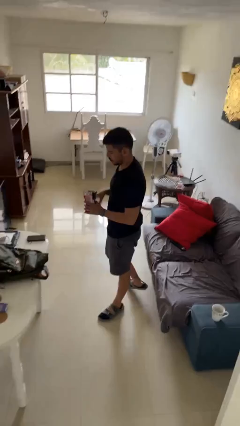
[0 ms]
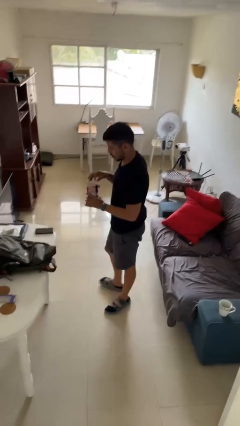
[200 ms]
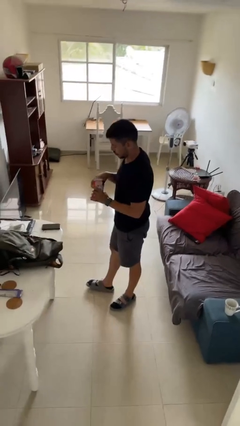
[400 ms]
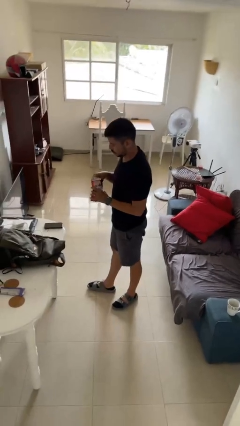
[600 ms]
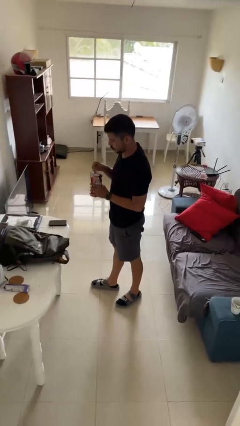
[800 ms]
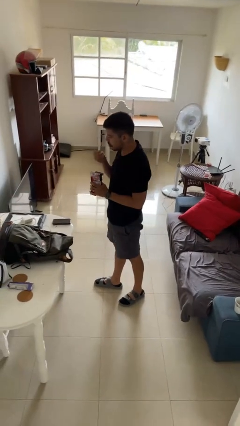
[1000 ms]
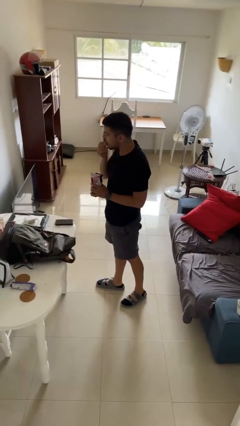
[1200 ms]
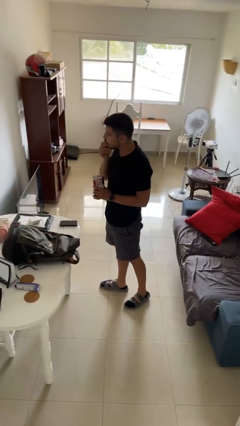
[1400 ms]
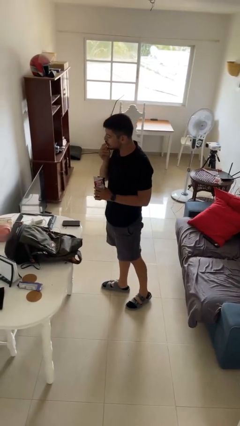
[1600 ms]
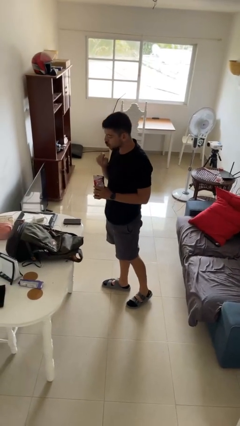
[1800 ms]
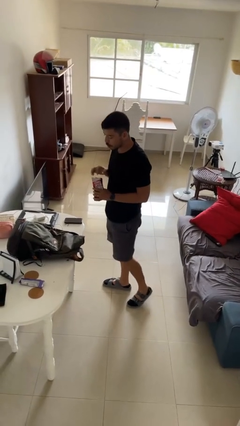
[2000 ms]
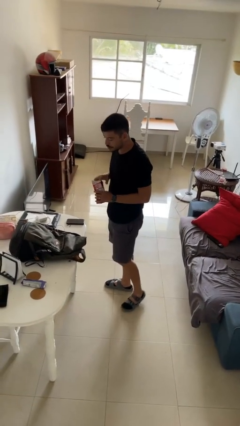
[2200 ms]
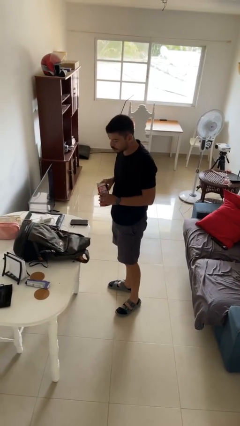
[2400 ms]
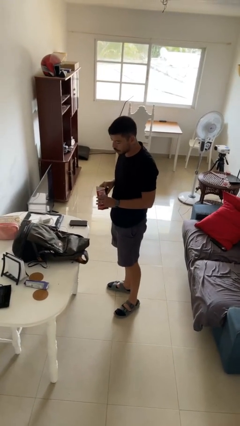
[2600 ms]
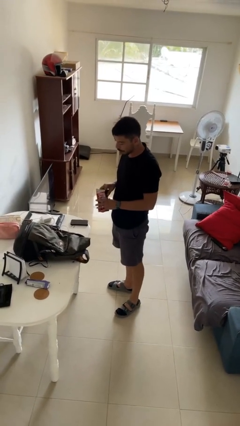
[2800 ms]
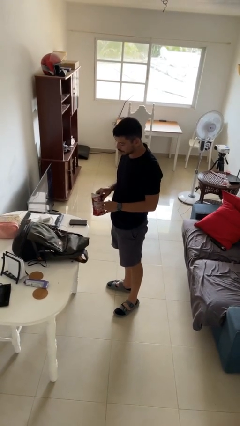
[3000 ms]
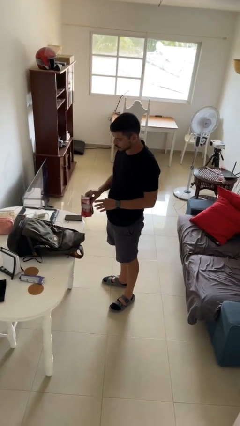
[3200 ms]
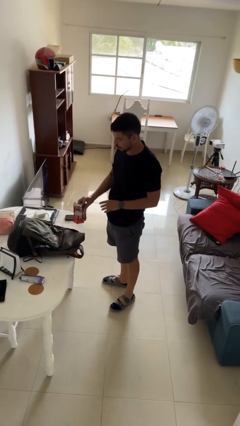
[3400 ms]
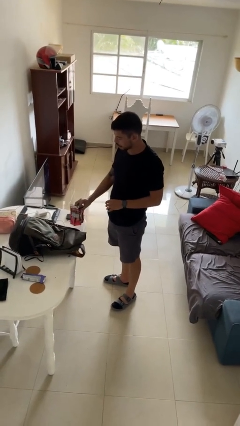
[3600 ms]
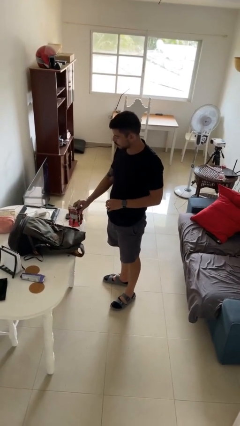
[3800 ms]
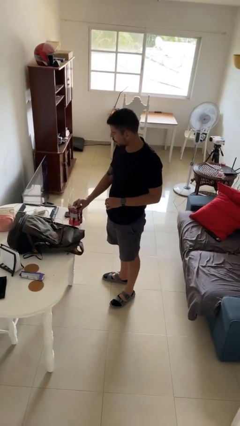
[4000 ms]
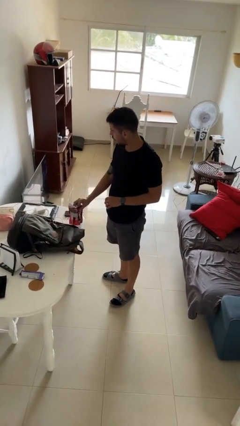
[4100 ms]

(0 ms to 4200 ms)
person eats snack from bag

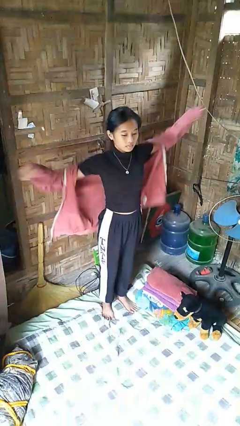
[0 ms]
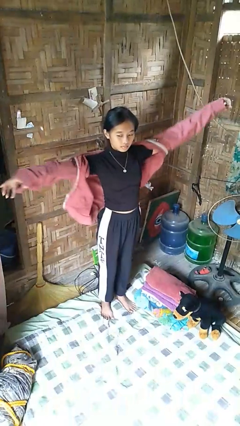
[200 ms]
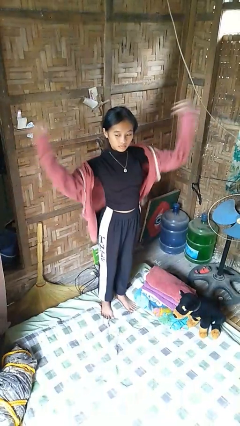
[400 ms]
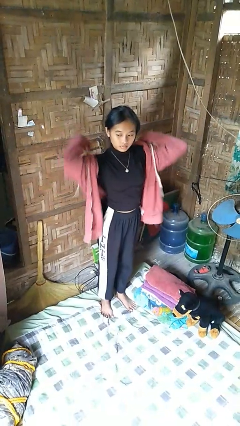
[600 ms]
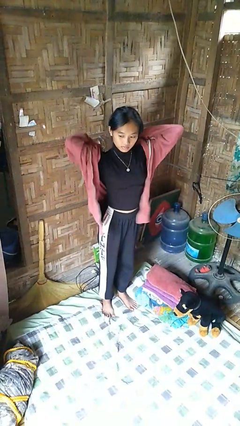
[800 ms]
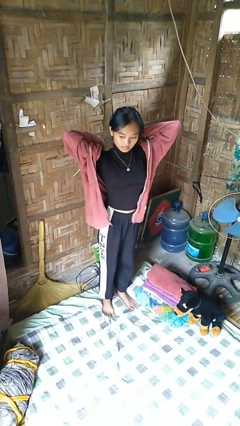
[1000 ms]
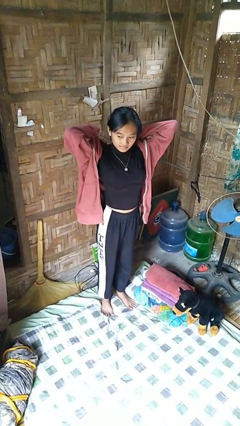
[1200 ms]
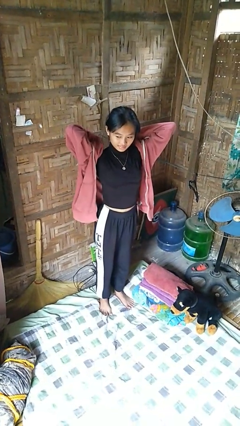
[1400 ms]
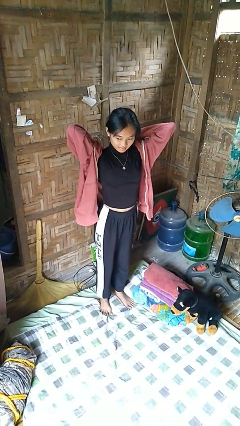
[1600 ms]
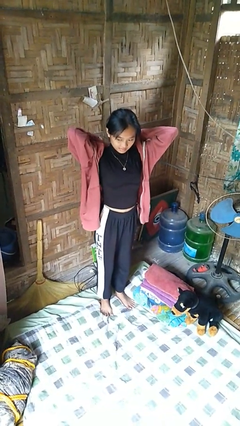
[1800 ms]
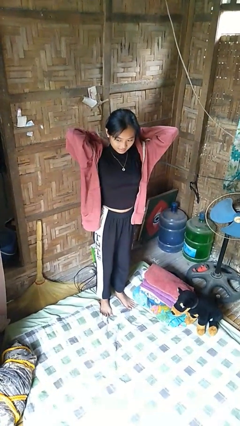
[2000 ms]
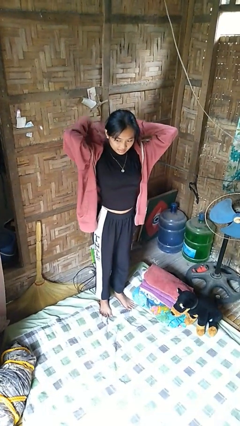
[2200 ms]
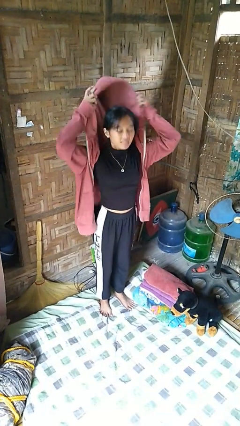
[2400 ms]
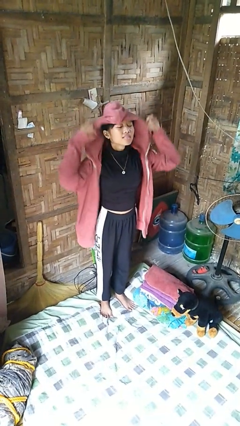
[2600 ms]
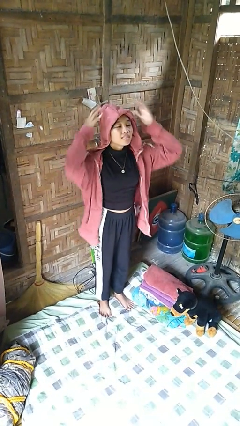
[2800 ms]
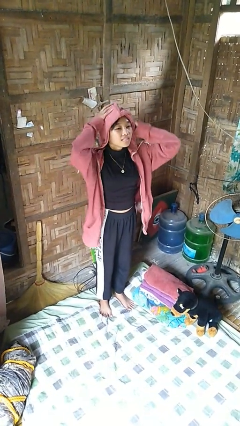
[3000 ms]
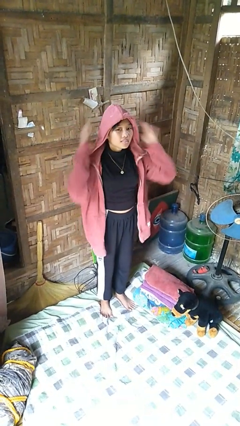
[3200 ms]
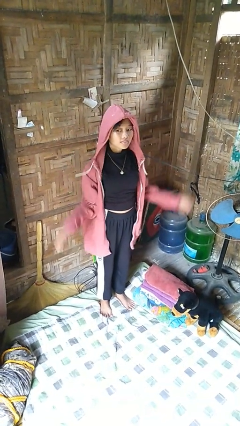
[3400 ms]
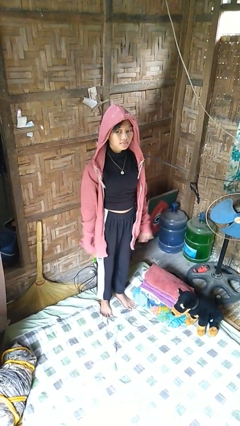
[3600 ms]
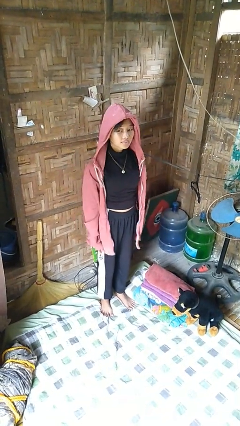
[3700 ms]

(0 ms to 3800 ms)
person puts on hoodie

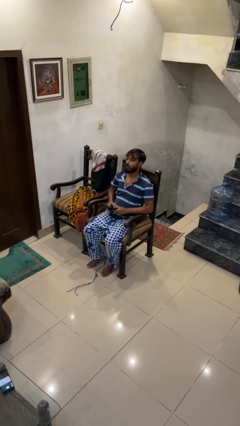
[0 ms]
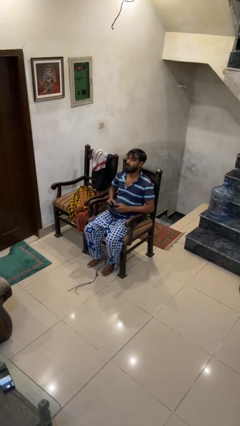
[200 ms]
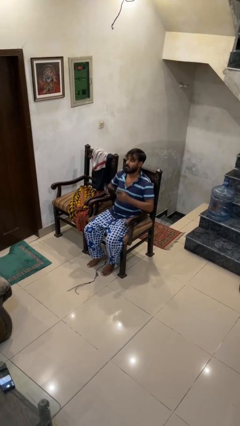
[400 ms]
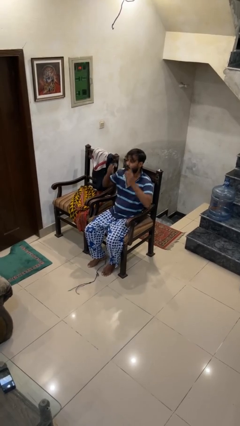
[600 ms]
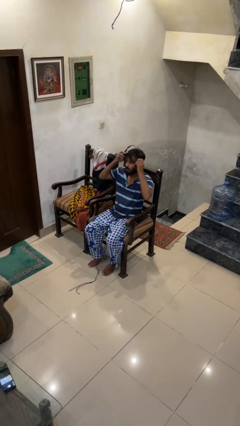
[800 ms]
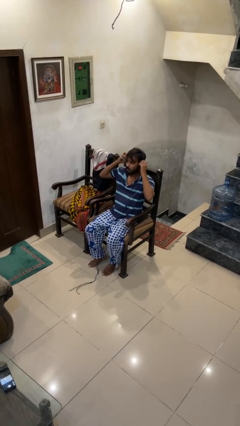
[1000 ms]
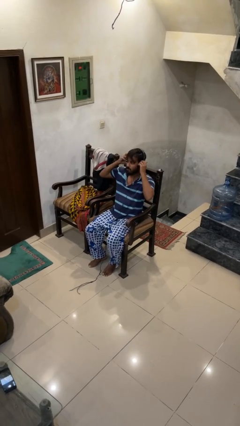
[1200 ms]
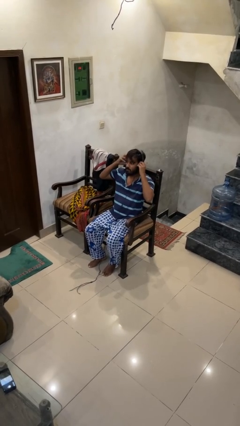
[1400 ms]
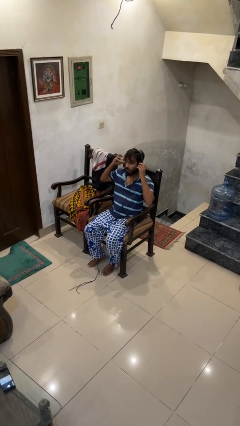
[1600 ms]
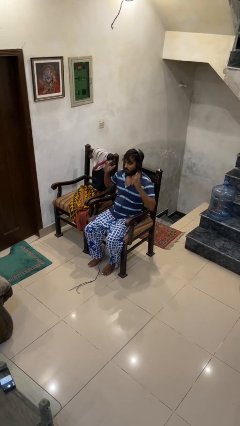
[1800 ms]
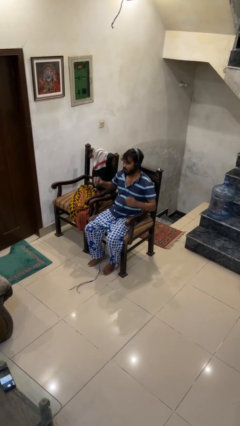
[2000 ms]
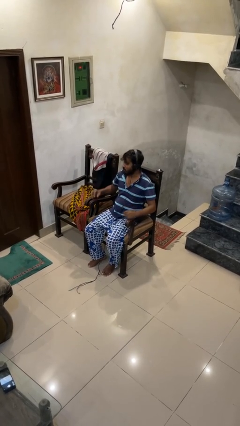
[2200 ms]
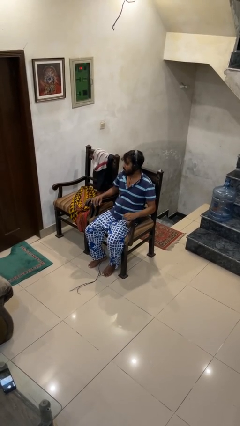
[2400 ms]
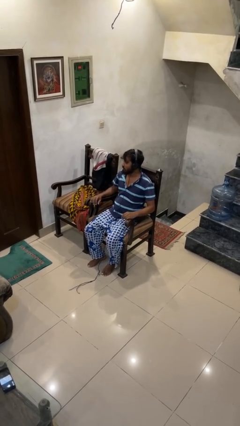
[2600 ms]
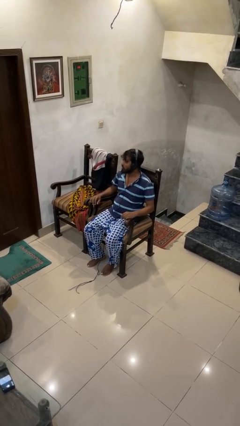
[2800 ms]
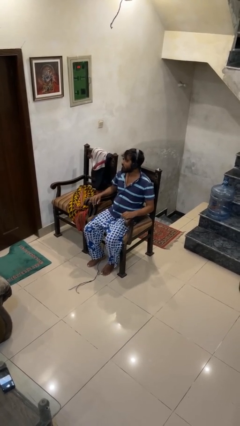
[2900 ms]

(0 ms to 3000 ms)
person puts on headphones

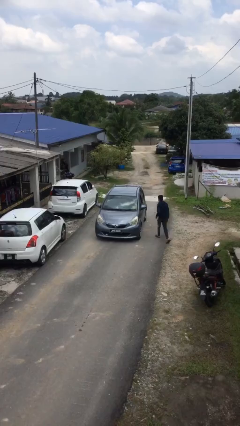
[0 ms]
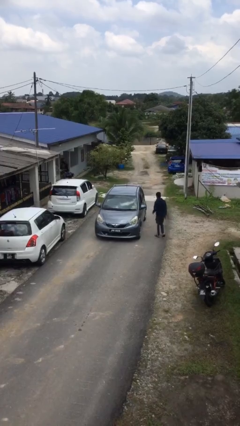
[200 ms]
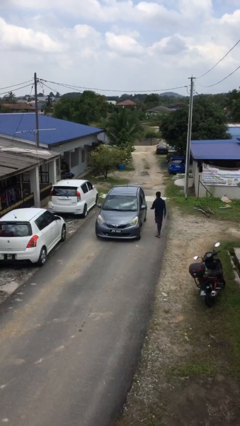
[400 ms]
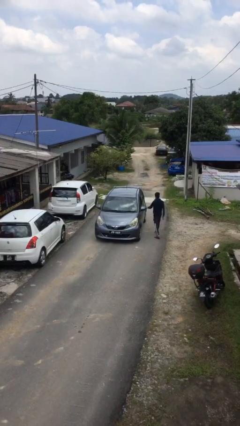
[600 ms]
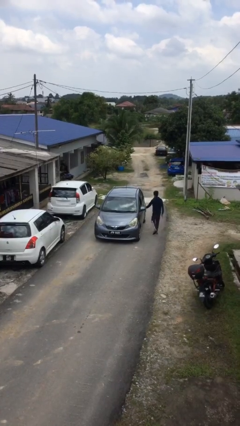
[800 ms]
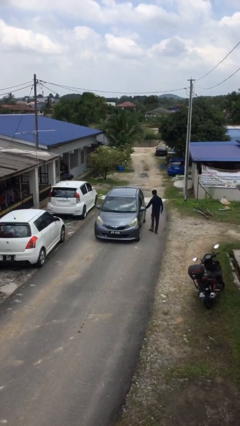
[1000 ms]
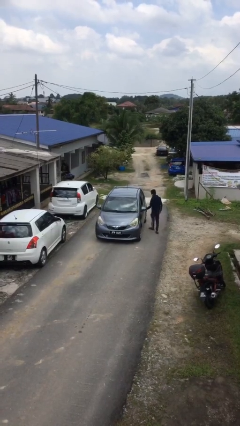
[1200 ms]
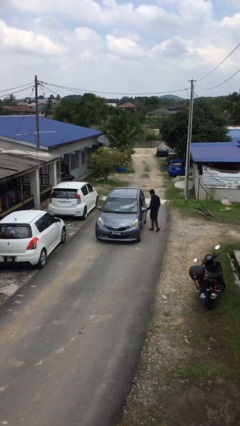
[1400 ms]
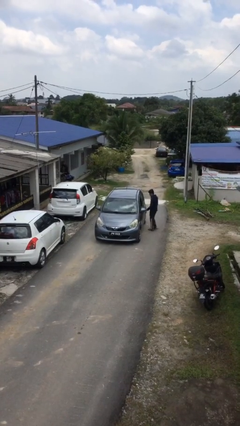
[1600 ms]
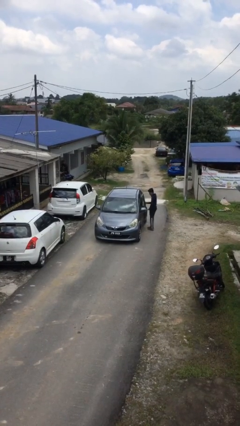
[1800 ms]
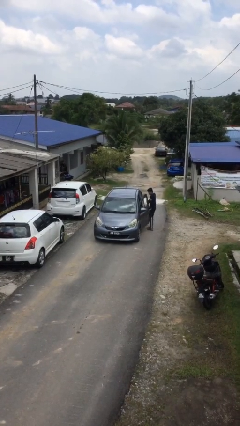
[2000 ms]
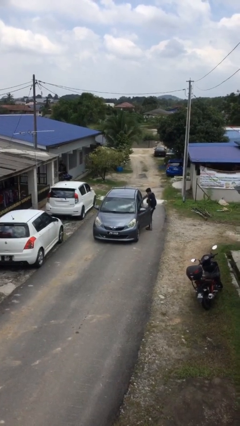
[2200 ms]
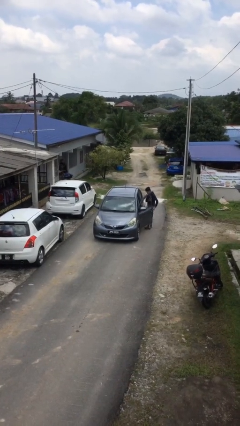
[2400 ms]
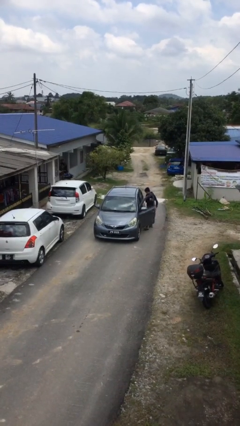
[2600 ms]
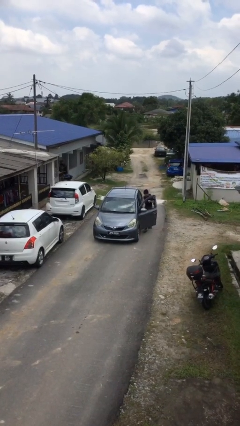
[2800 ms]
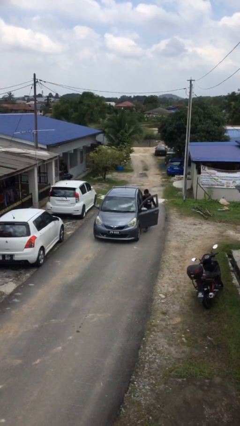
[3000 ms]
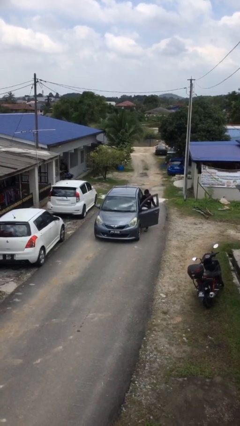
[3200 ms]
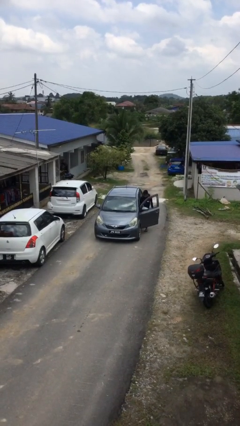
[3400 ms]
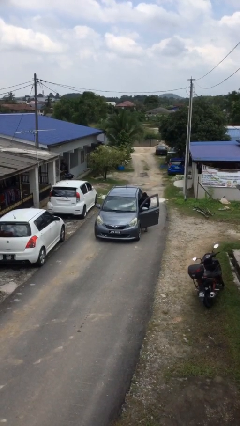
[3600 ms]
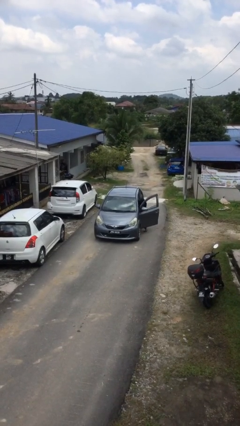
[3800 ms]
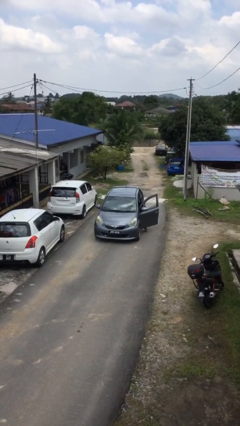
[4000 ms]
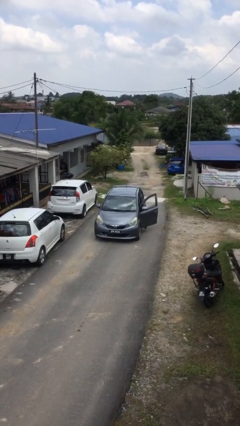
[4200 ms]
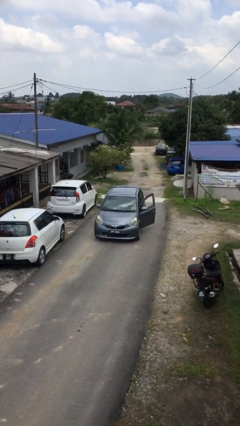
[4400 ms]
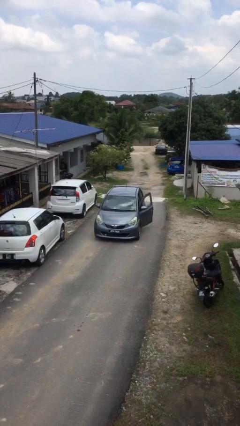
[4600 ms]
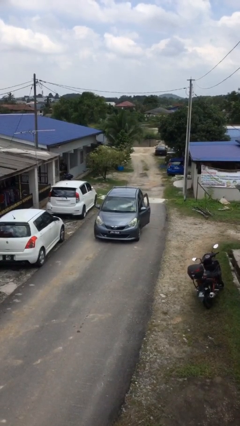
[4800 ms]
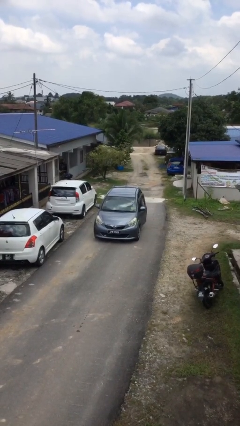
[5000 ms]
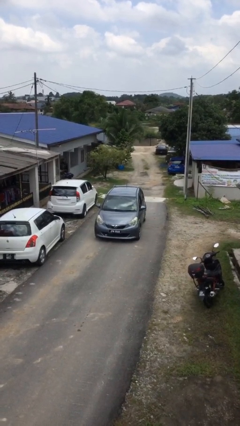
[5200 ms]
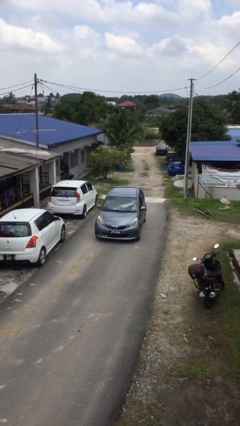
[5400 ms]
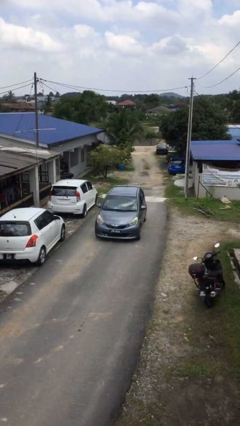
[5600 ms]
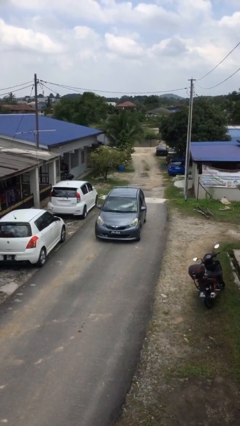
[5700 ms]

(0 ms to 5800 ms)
car picks up person

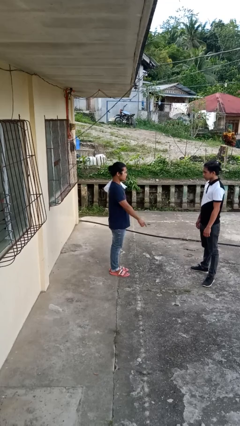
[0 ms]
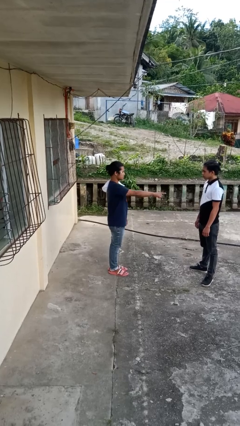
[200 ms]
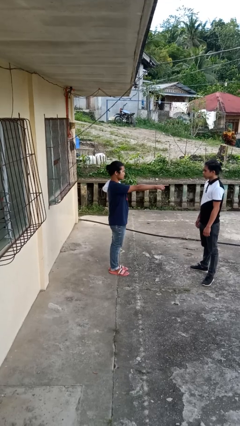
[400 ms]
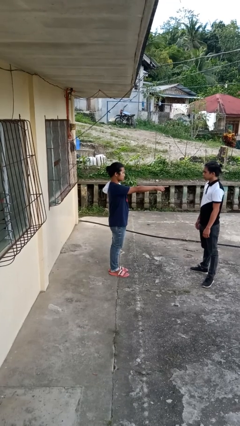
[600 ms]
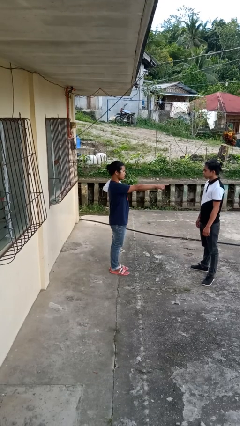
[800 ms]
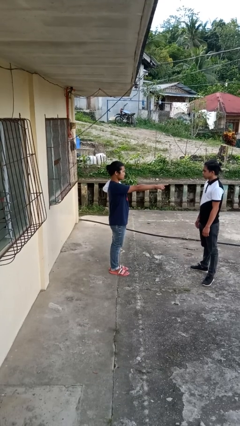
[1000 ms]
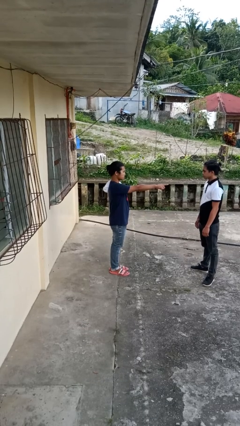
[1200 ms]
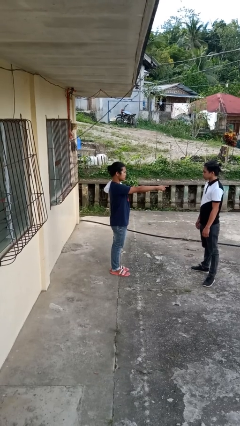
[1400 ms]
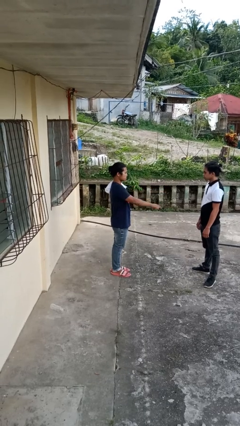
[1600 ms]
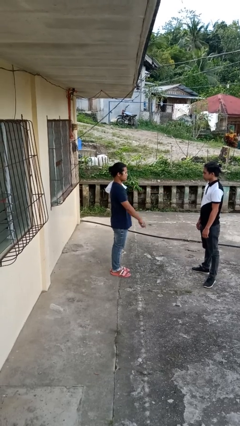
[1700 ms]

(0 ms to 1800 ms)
person points at person
